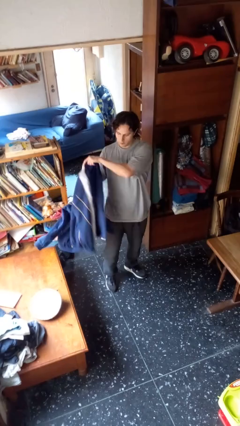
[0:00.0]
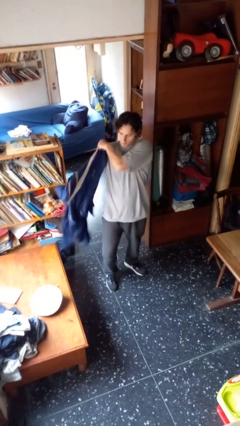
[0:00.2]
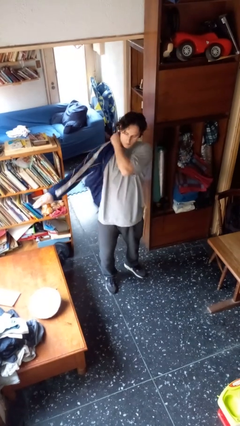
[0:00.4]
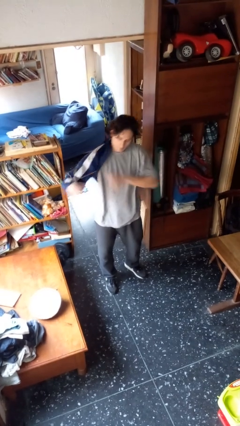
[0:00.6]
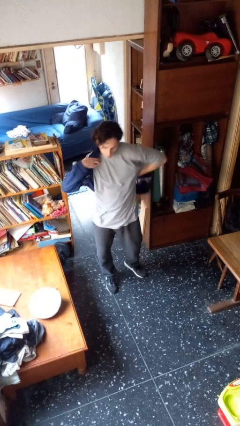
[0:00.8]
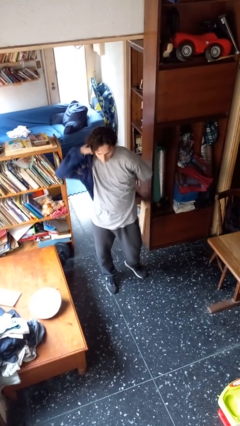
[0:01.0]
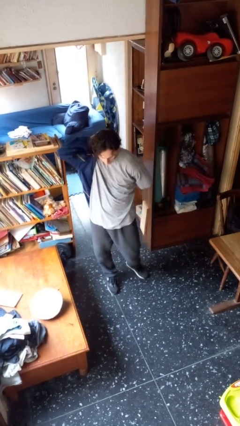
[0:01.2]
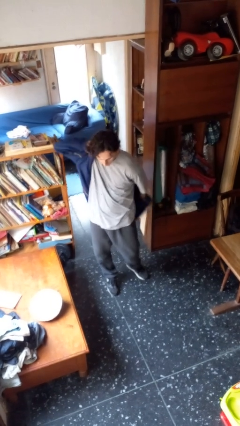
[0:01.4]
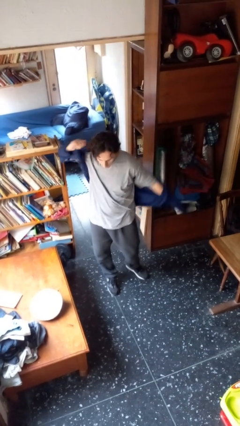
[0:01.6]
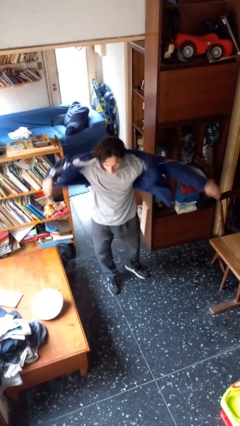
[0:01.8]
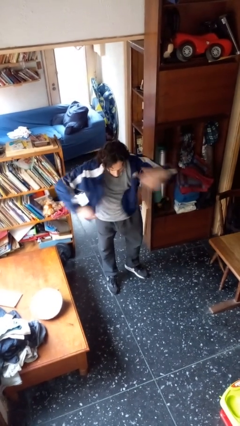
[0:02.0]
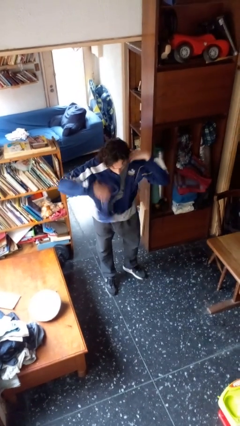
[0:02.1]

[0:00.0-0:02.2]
person puts on jacket

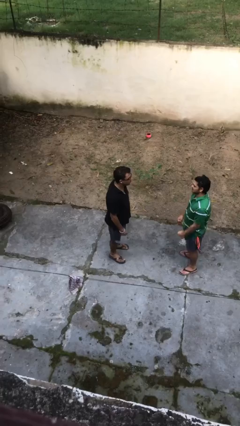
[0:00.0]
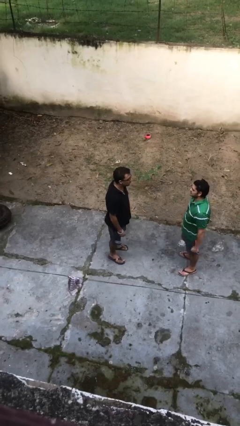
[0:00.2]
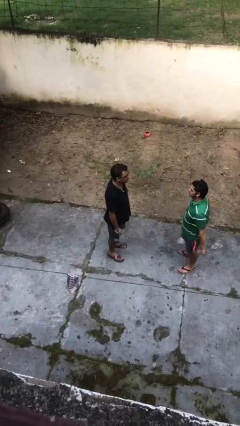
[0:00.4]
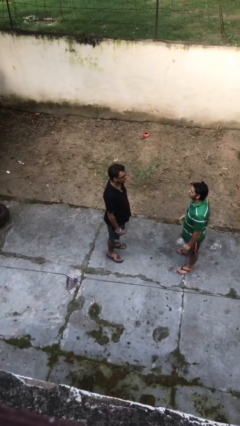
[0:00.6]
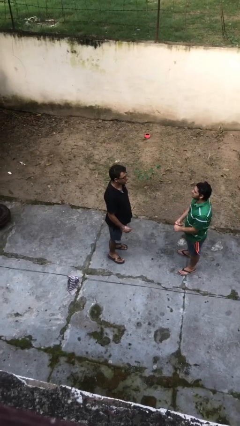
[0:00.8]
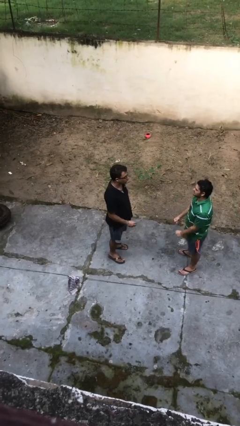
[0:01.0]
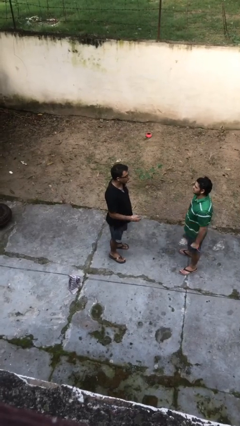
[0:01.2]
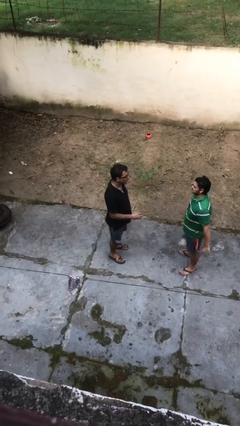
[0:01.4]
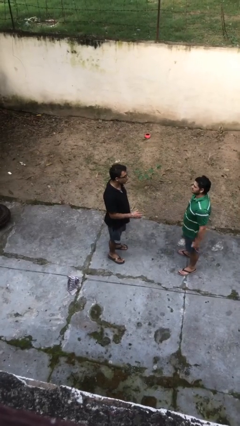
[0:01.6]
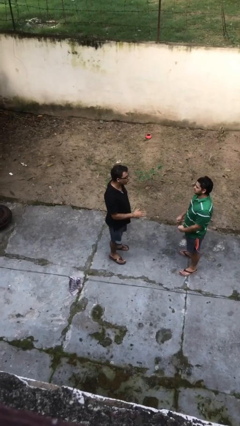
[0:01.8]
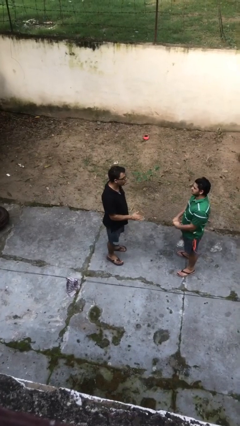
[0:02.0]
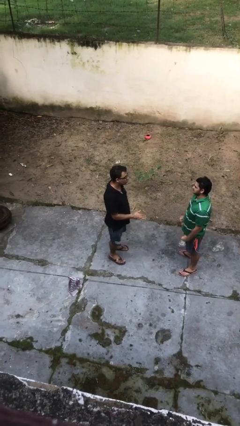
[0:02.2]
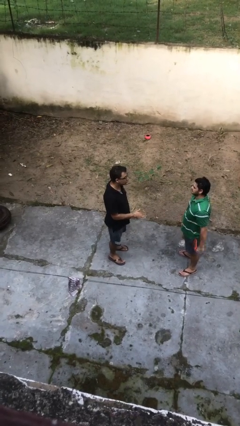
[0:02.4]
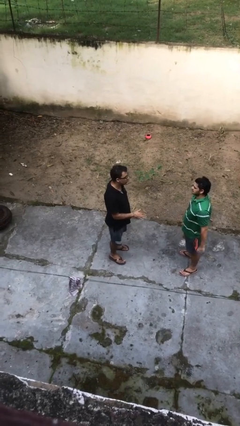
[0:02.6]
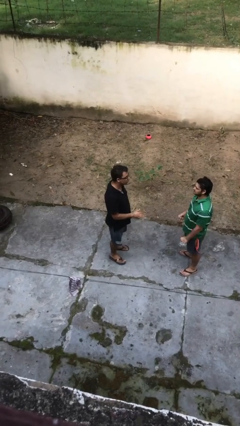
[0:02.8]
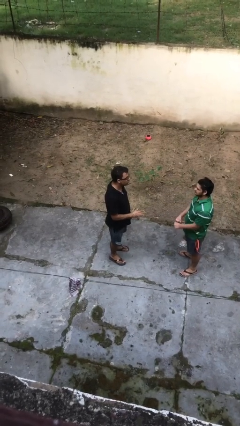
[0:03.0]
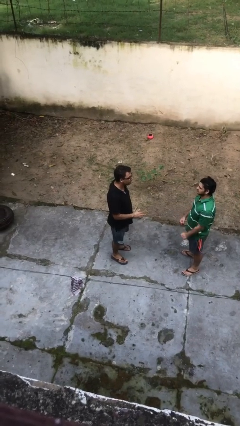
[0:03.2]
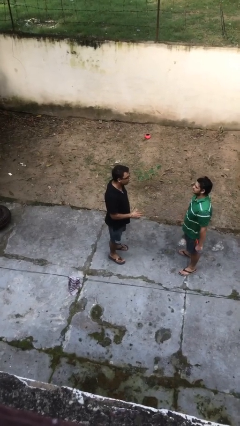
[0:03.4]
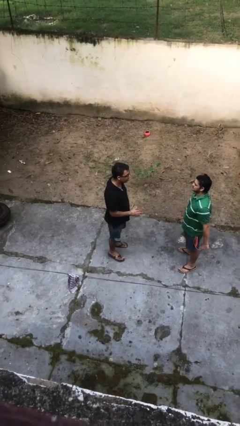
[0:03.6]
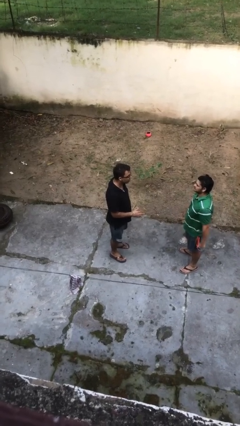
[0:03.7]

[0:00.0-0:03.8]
person talks to person

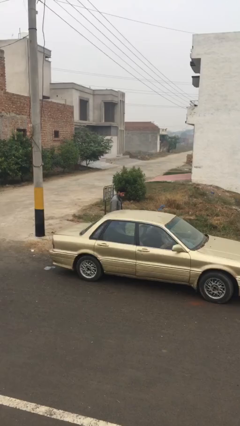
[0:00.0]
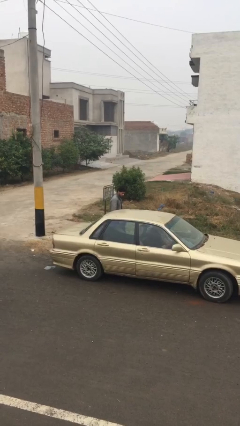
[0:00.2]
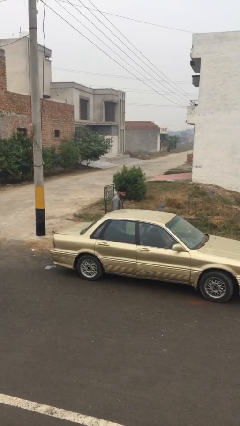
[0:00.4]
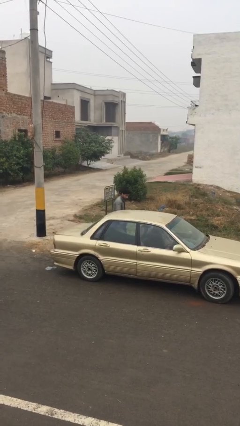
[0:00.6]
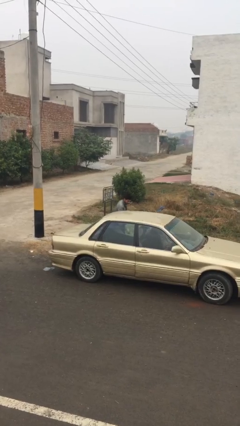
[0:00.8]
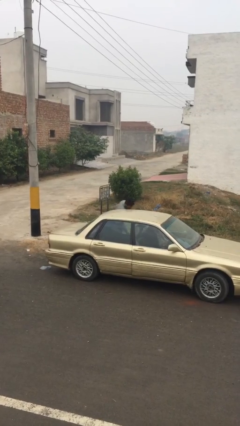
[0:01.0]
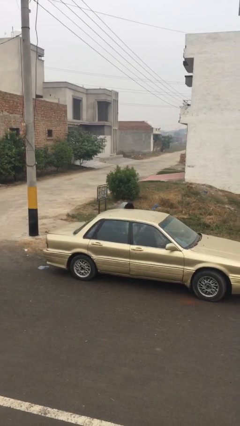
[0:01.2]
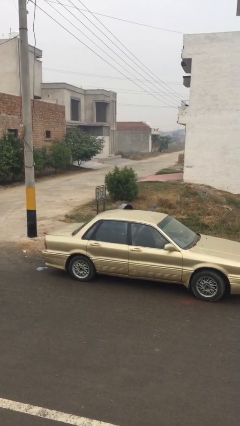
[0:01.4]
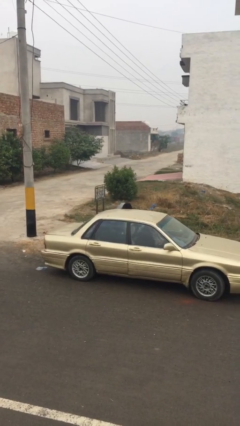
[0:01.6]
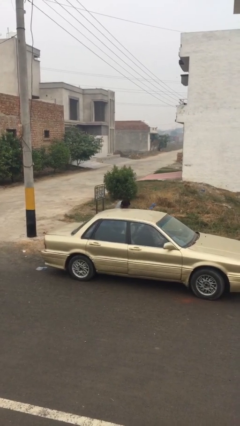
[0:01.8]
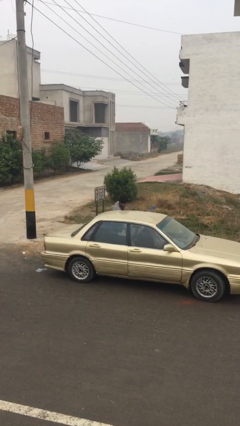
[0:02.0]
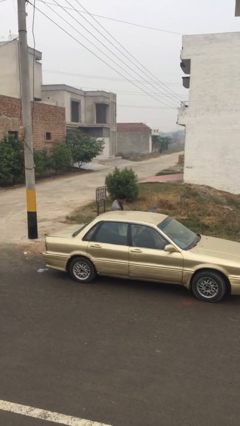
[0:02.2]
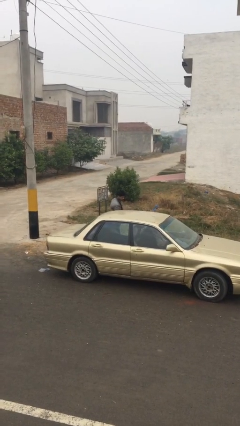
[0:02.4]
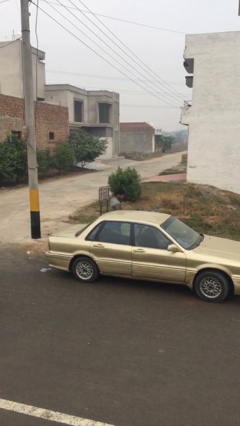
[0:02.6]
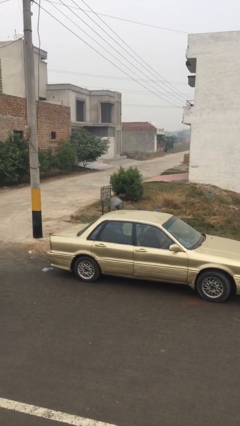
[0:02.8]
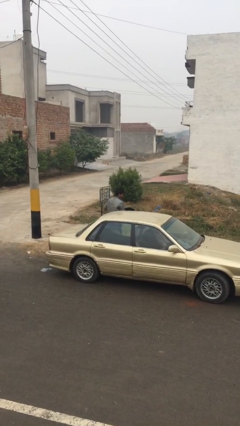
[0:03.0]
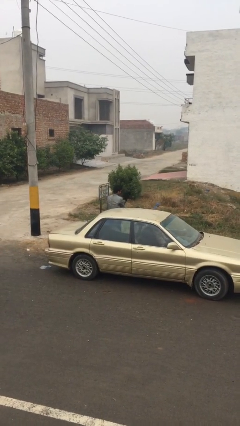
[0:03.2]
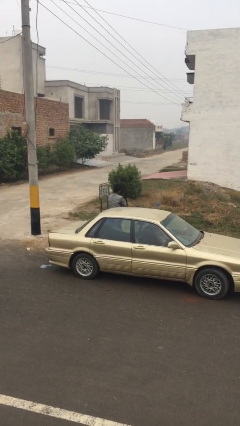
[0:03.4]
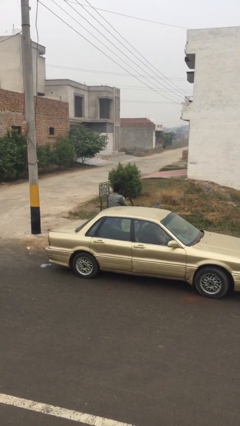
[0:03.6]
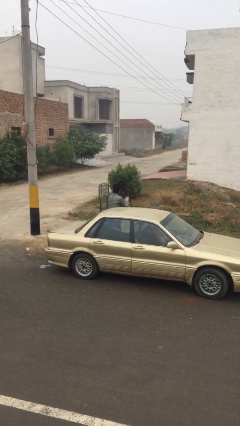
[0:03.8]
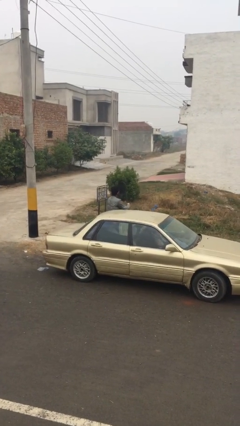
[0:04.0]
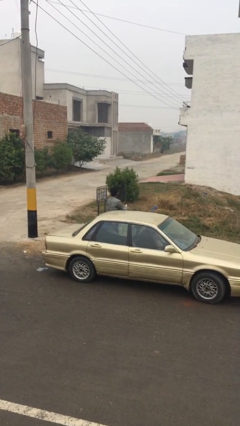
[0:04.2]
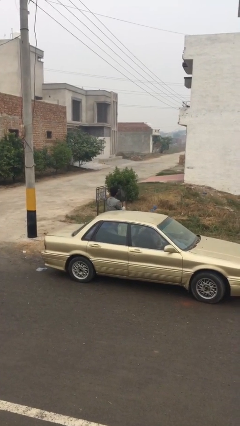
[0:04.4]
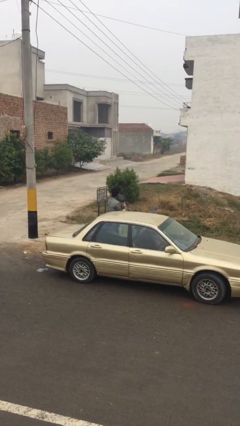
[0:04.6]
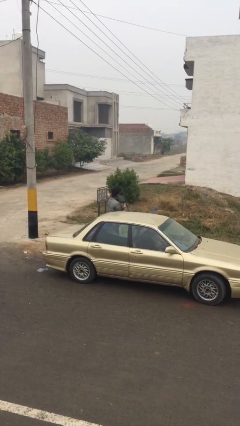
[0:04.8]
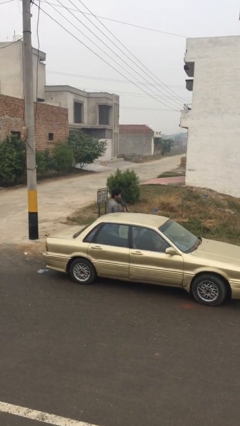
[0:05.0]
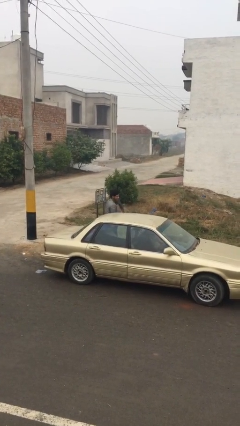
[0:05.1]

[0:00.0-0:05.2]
person unloads car

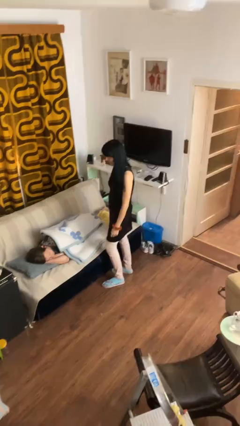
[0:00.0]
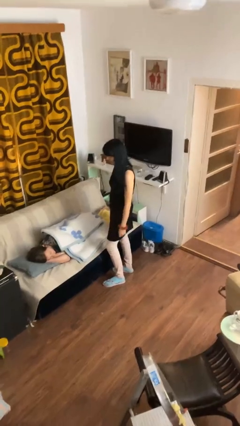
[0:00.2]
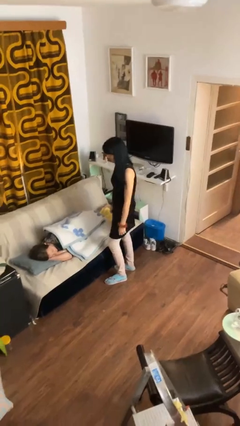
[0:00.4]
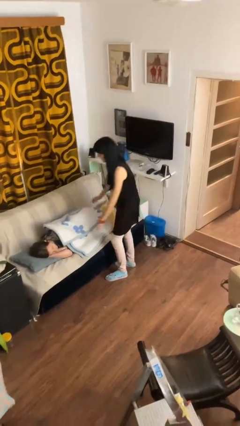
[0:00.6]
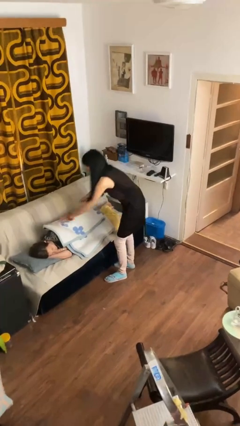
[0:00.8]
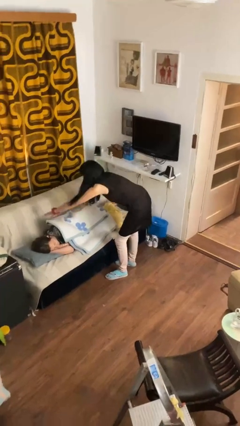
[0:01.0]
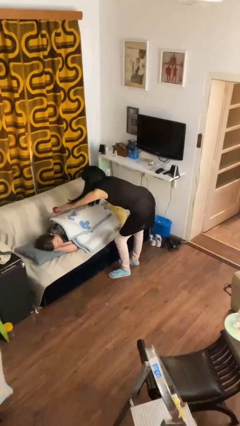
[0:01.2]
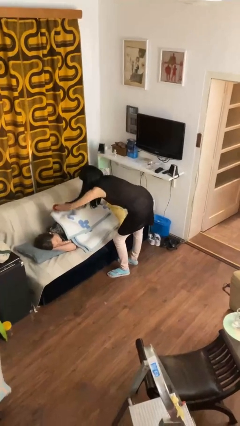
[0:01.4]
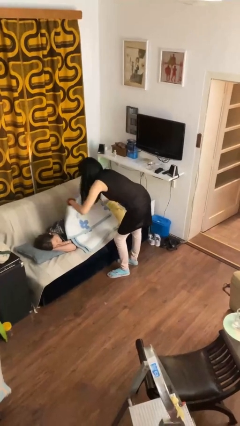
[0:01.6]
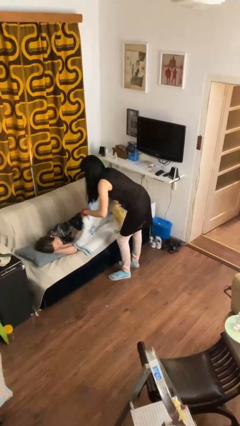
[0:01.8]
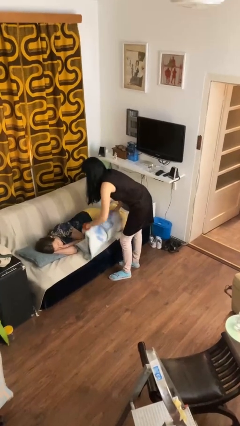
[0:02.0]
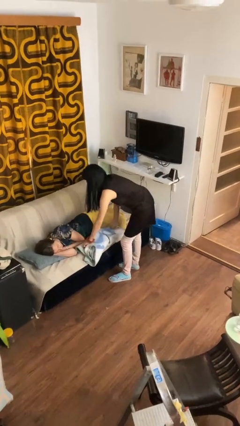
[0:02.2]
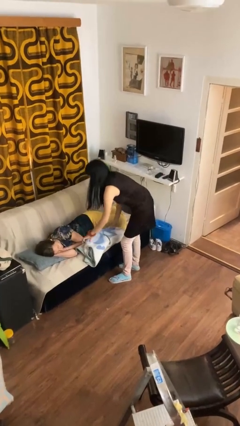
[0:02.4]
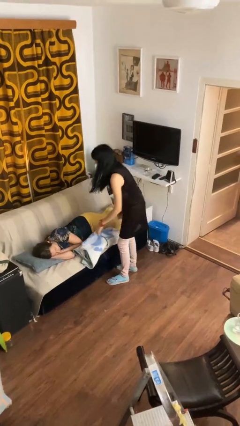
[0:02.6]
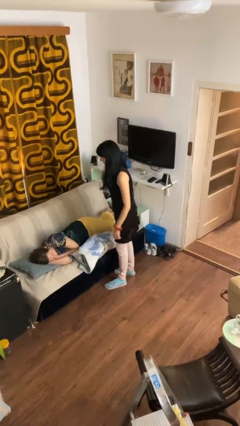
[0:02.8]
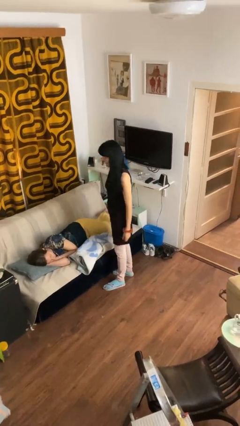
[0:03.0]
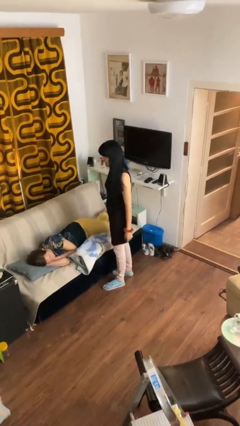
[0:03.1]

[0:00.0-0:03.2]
person uncovers friend with blanket

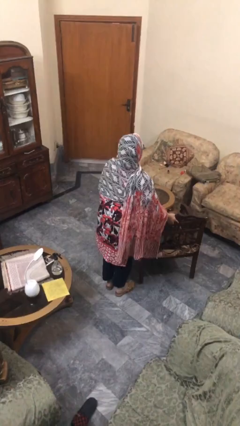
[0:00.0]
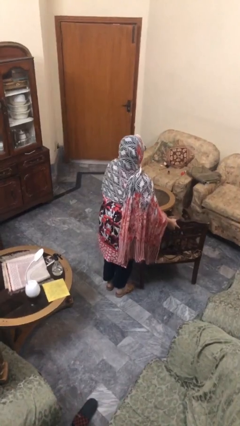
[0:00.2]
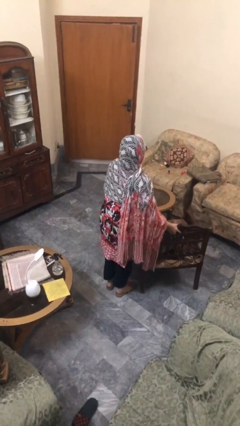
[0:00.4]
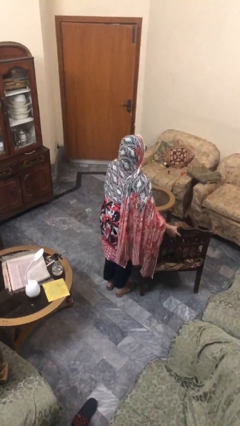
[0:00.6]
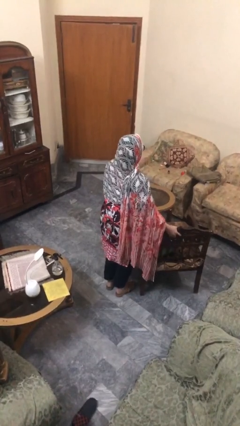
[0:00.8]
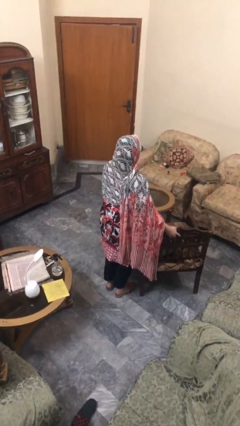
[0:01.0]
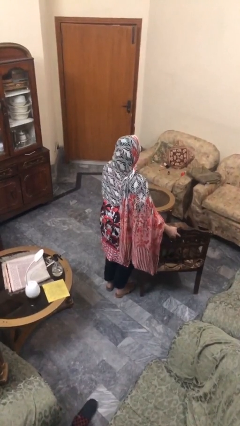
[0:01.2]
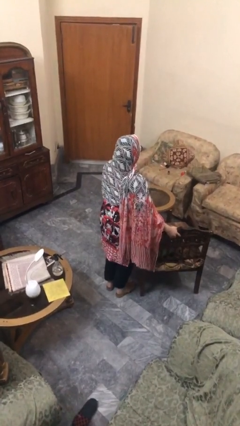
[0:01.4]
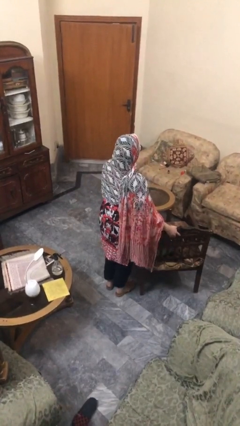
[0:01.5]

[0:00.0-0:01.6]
person pulls out chair

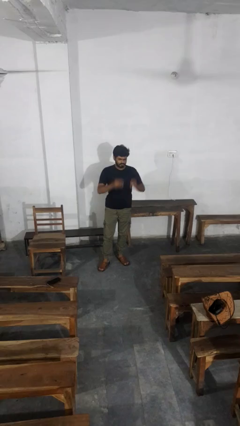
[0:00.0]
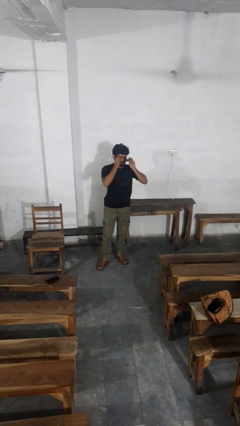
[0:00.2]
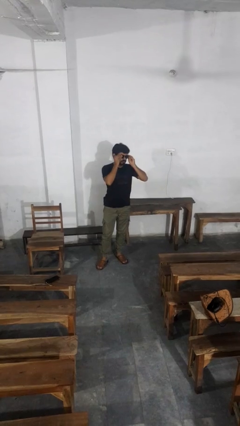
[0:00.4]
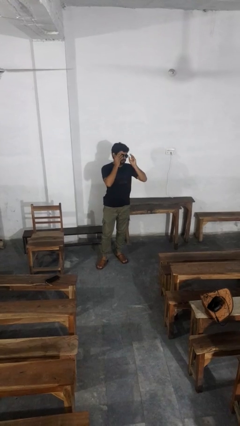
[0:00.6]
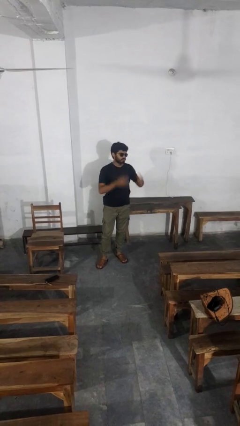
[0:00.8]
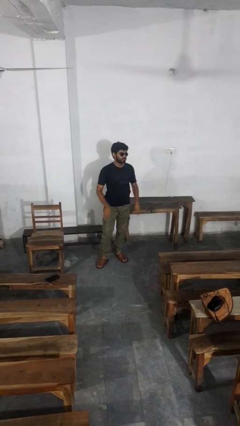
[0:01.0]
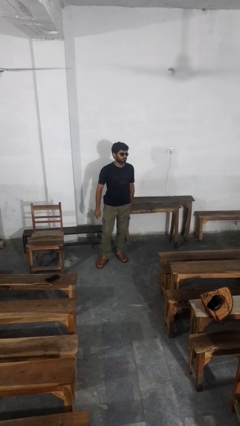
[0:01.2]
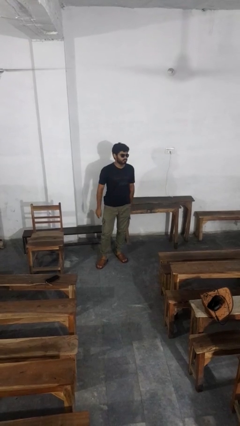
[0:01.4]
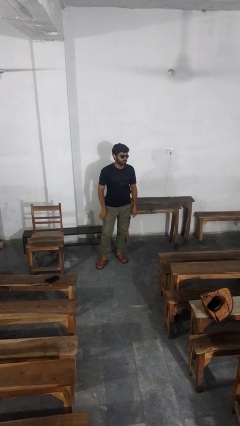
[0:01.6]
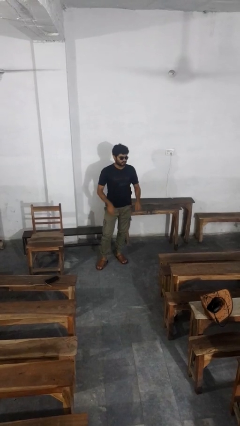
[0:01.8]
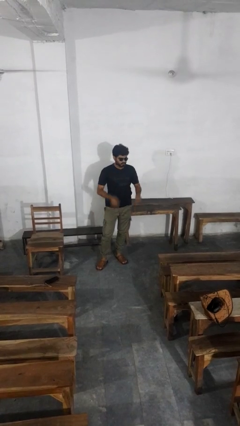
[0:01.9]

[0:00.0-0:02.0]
person puts on sunglasses
